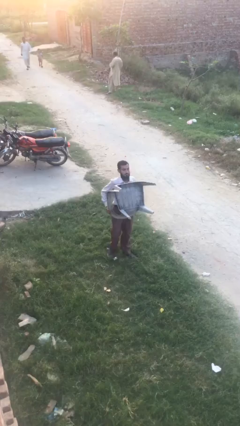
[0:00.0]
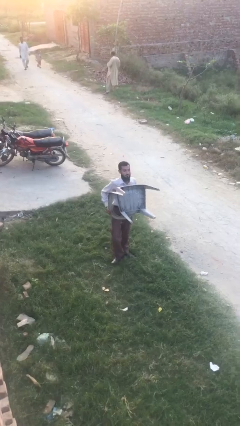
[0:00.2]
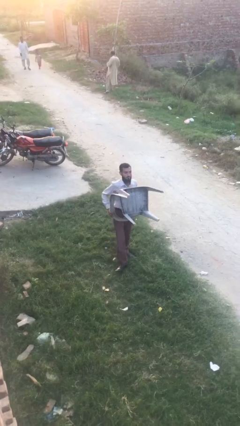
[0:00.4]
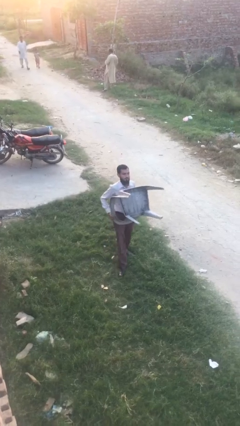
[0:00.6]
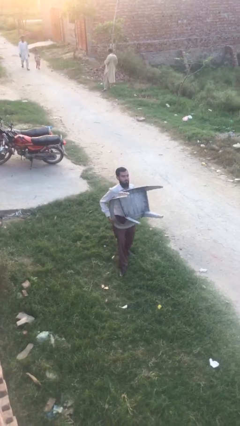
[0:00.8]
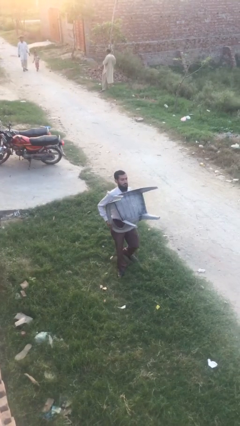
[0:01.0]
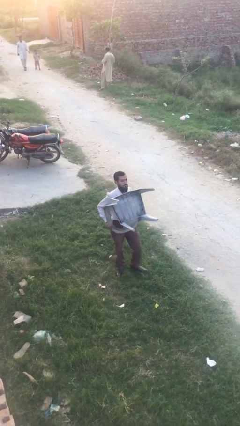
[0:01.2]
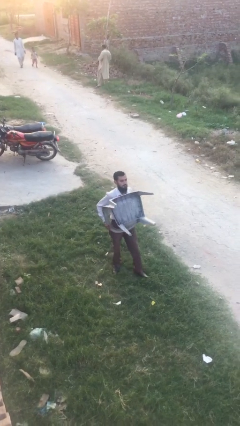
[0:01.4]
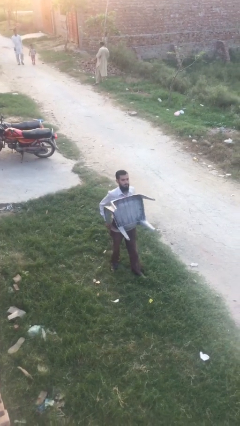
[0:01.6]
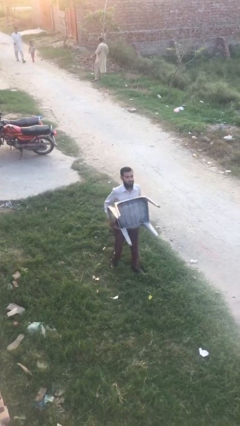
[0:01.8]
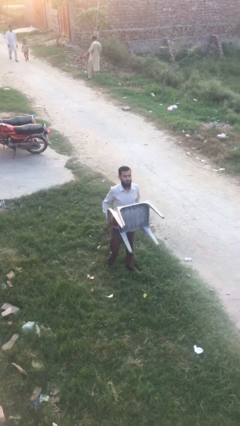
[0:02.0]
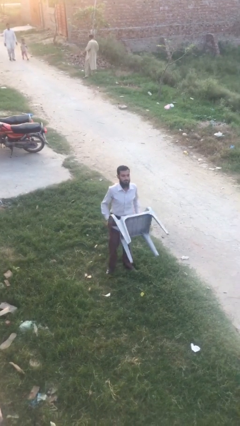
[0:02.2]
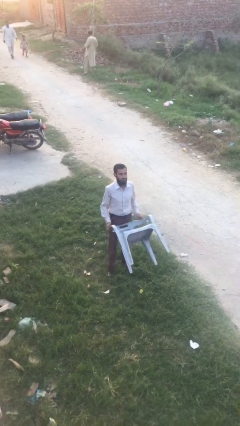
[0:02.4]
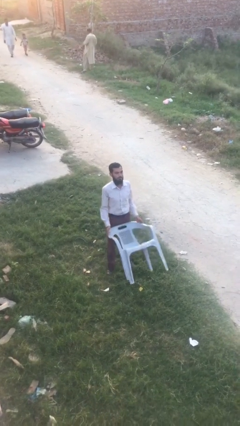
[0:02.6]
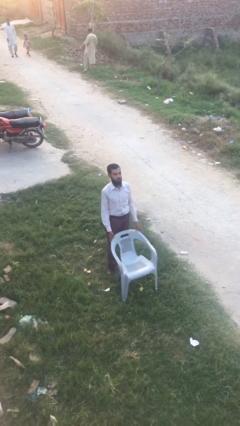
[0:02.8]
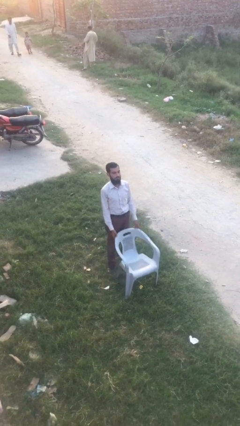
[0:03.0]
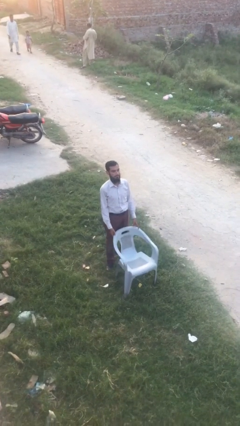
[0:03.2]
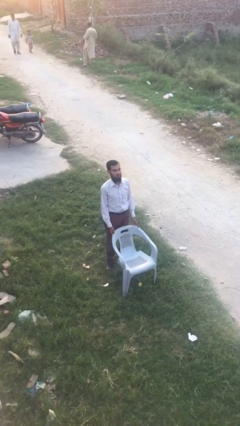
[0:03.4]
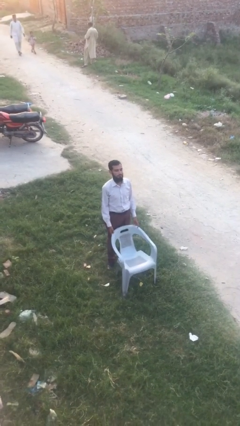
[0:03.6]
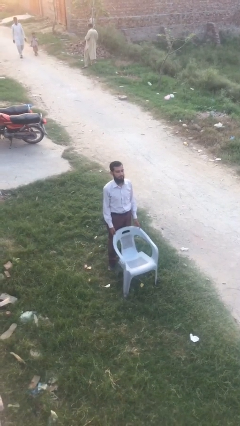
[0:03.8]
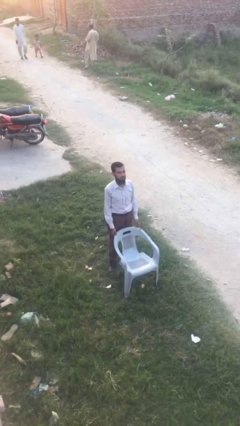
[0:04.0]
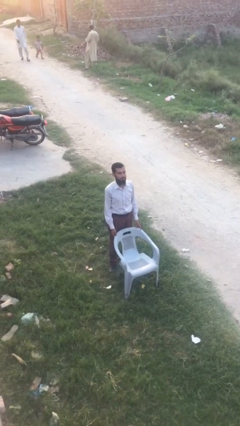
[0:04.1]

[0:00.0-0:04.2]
person puts down object on floor

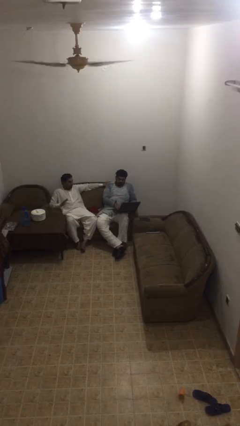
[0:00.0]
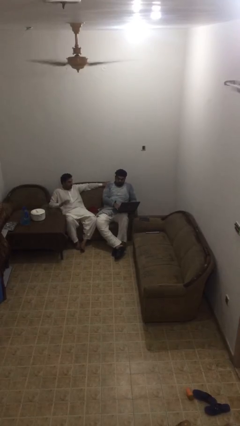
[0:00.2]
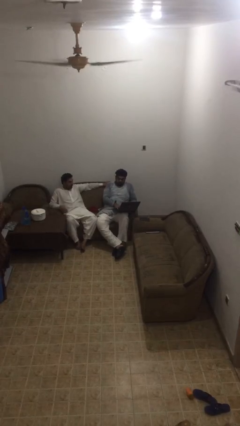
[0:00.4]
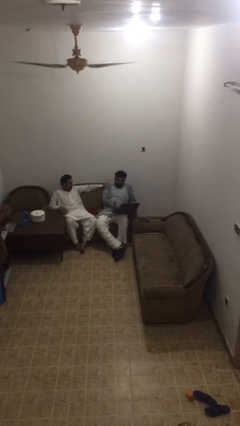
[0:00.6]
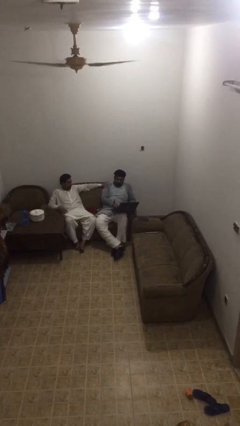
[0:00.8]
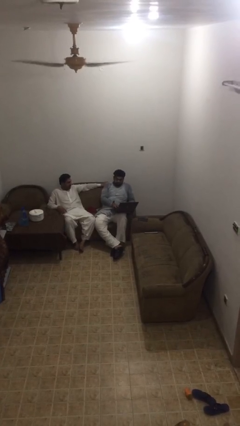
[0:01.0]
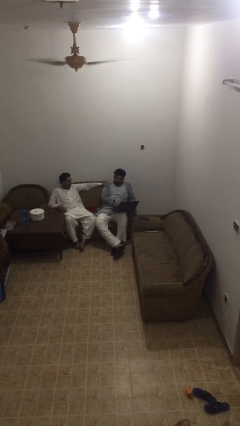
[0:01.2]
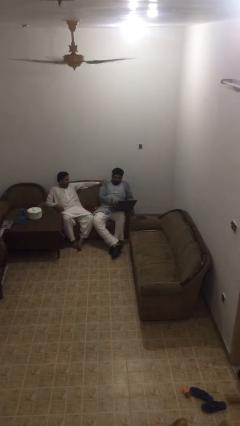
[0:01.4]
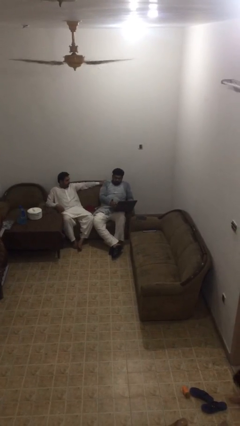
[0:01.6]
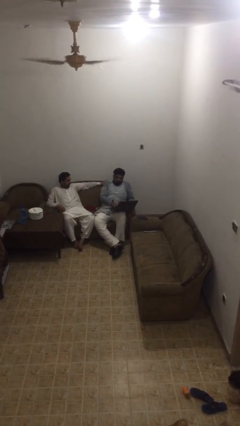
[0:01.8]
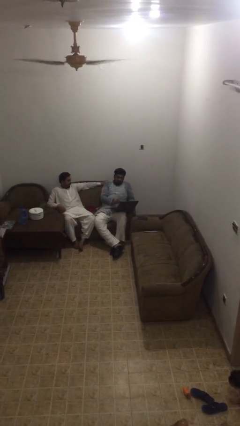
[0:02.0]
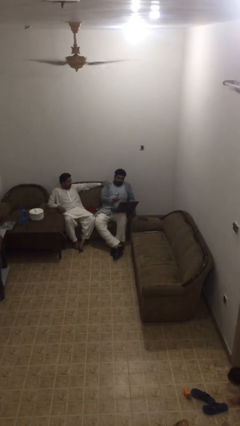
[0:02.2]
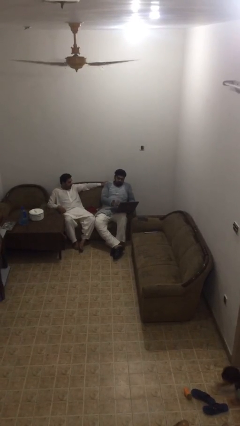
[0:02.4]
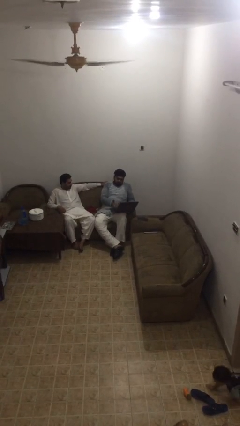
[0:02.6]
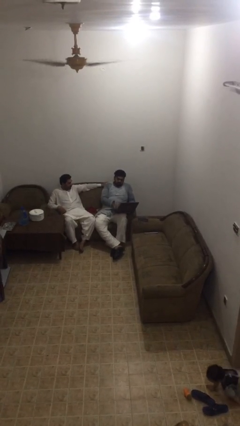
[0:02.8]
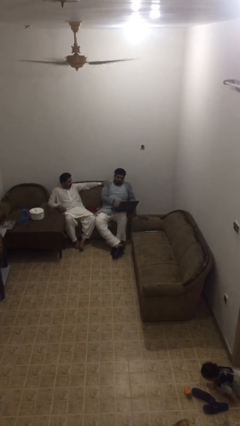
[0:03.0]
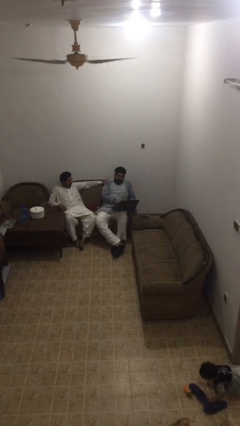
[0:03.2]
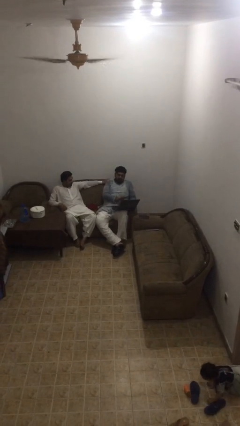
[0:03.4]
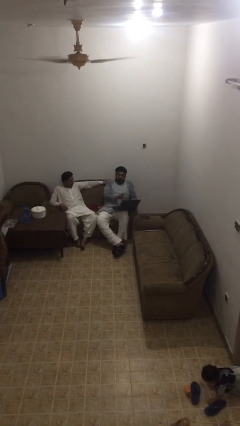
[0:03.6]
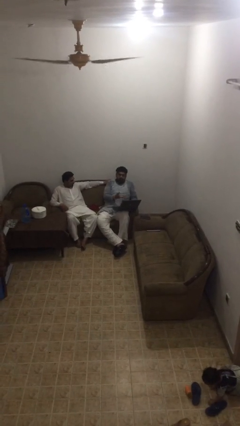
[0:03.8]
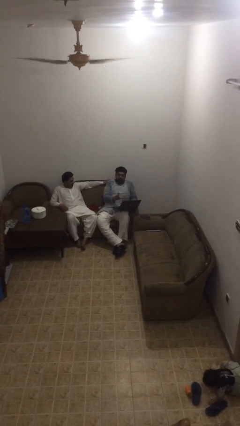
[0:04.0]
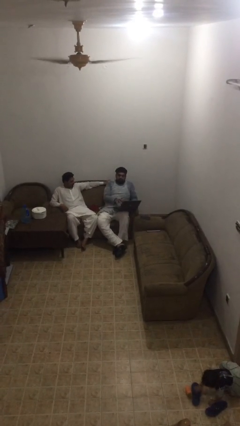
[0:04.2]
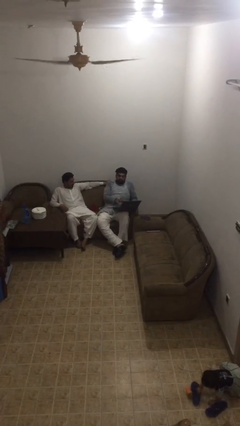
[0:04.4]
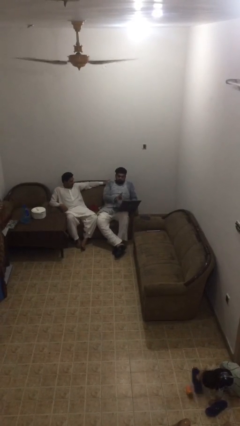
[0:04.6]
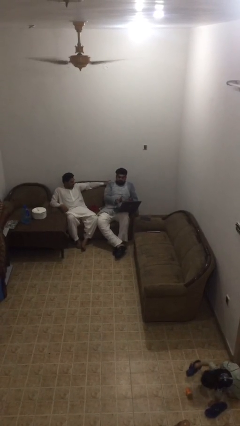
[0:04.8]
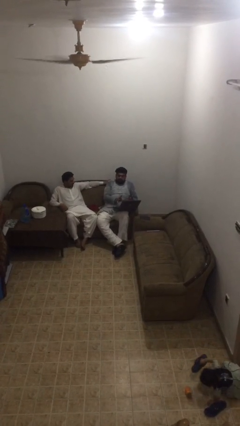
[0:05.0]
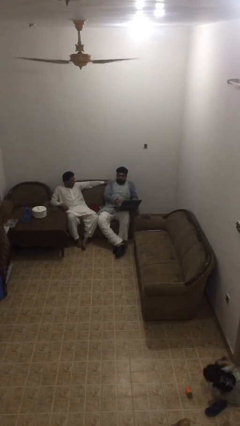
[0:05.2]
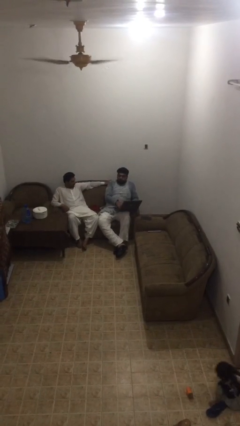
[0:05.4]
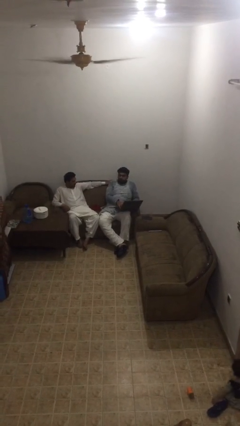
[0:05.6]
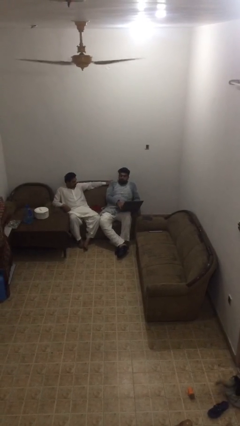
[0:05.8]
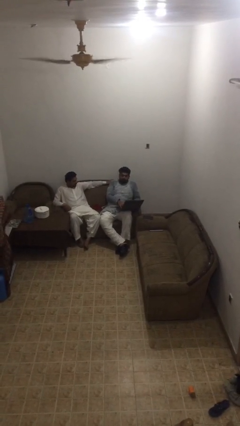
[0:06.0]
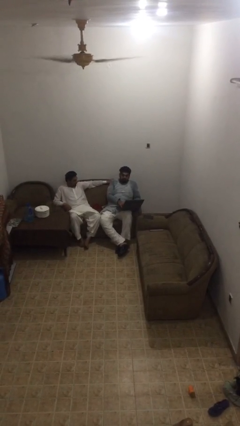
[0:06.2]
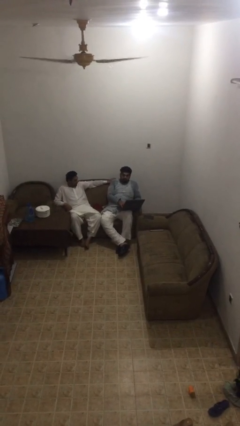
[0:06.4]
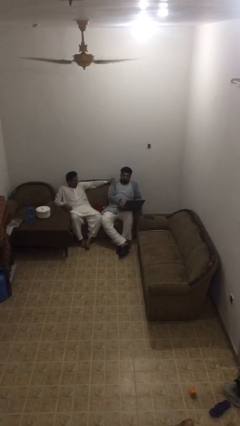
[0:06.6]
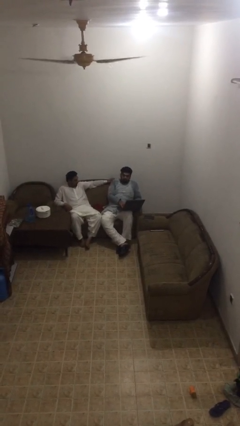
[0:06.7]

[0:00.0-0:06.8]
person interacts with laptop

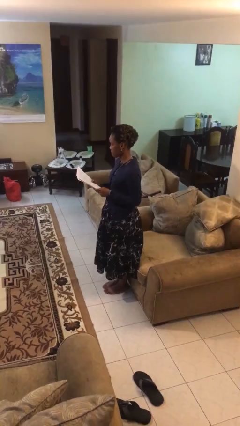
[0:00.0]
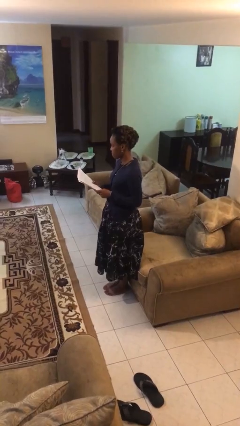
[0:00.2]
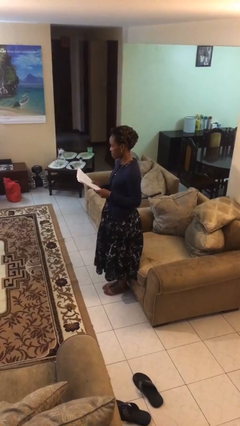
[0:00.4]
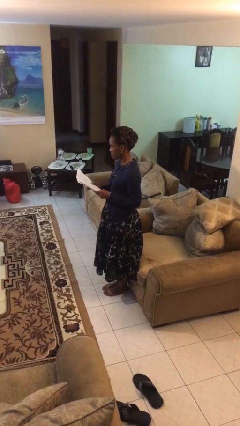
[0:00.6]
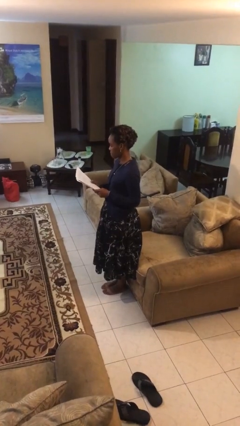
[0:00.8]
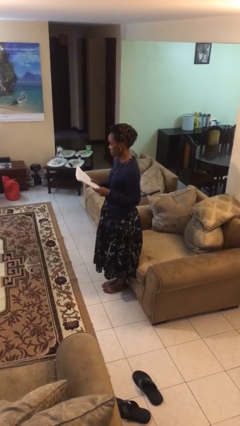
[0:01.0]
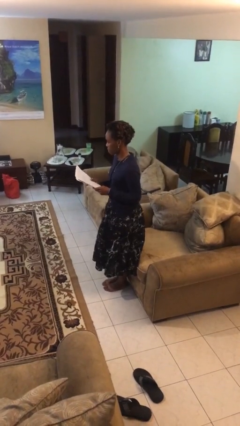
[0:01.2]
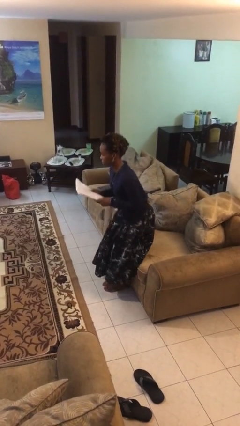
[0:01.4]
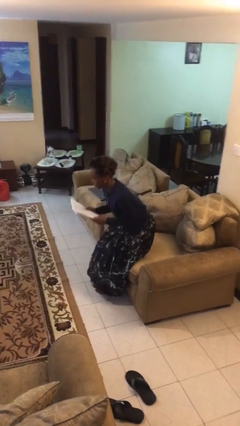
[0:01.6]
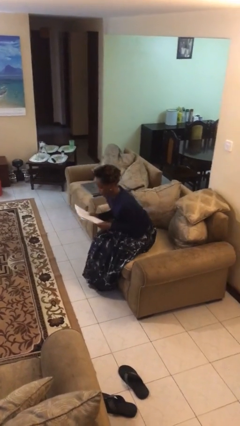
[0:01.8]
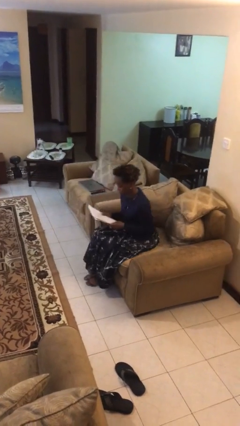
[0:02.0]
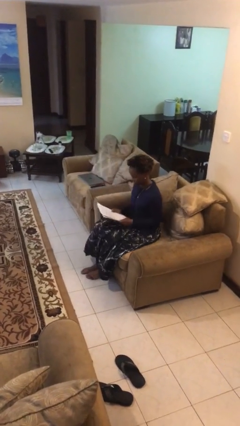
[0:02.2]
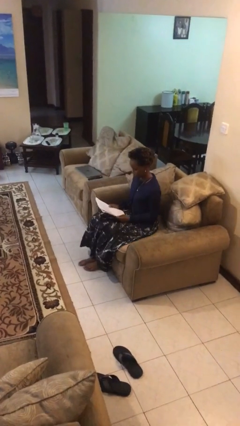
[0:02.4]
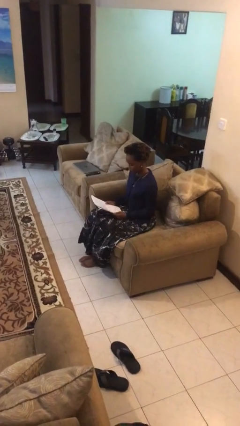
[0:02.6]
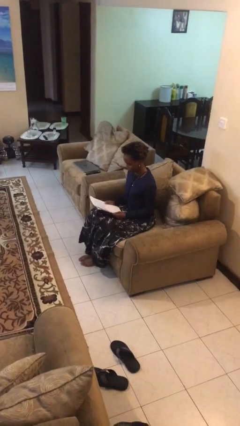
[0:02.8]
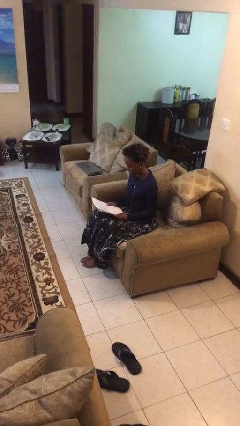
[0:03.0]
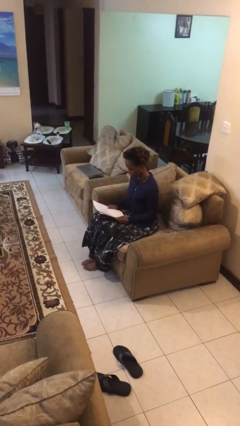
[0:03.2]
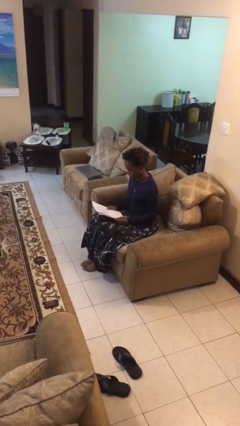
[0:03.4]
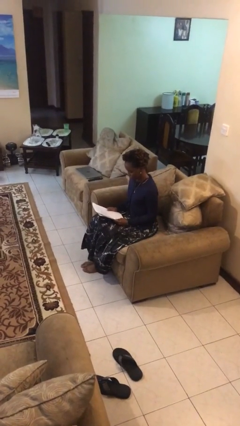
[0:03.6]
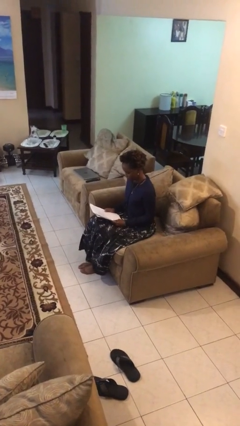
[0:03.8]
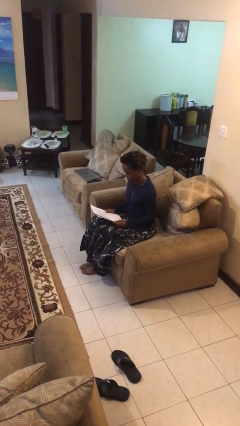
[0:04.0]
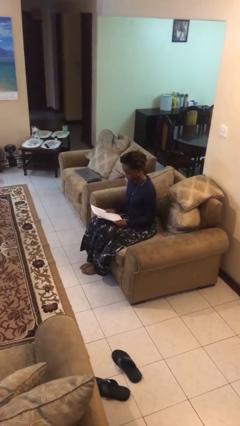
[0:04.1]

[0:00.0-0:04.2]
person sits down

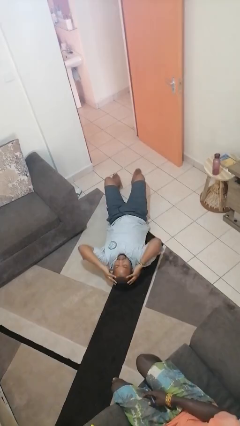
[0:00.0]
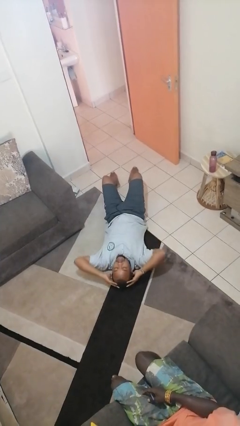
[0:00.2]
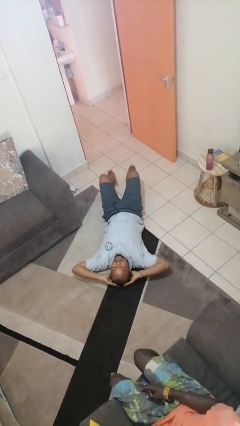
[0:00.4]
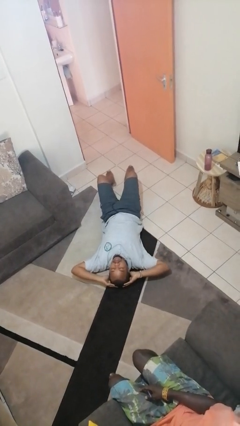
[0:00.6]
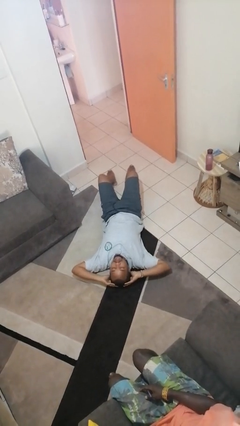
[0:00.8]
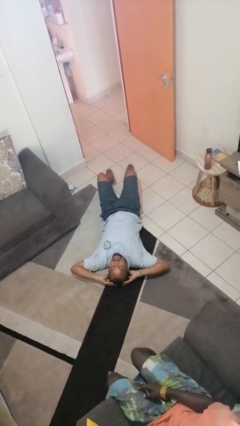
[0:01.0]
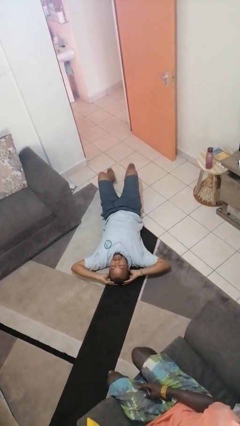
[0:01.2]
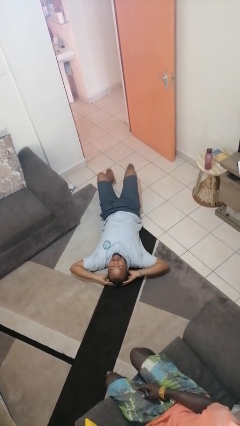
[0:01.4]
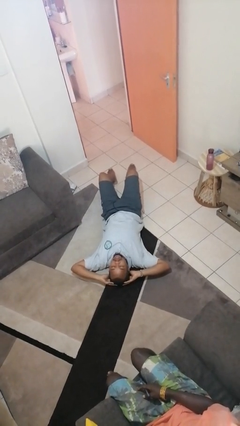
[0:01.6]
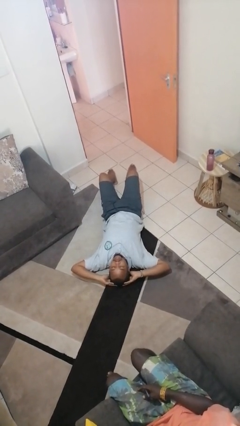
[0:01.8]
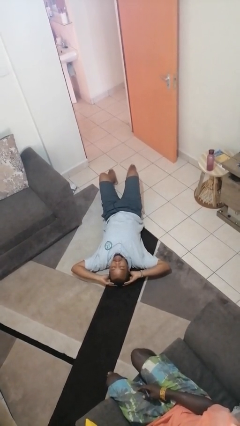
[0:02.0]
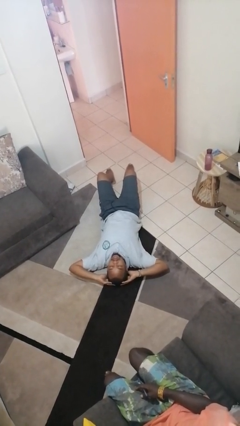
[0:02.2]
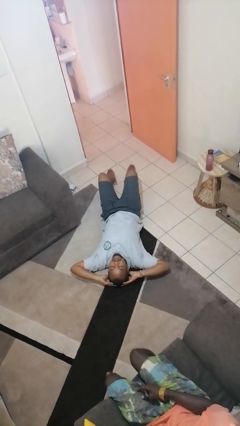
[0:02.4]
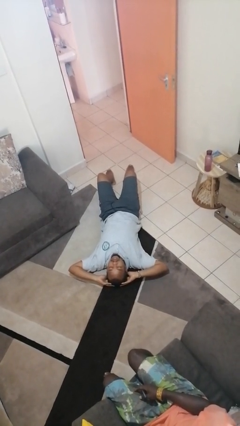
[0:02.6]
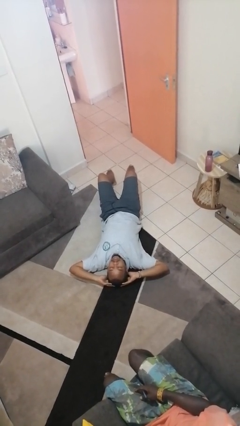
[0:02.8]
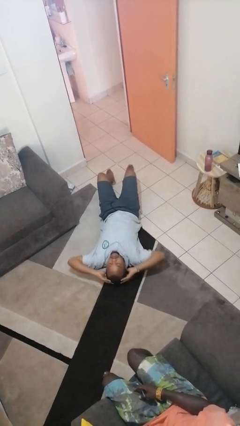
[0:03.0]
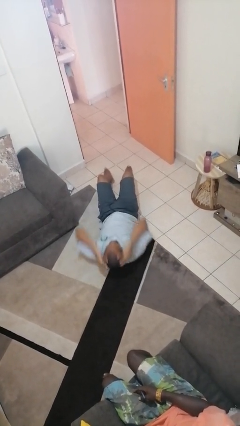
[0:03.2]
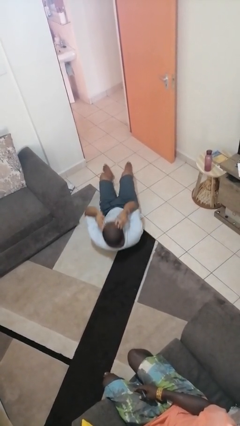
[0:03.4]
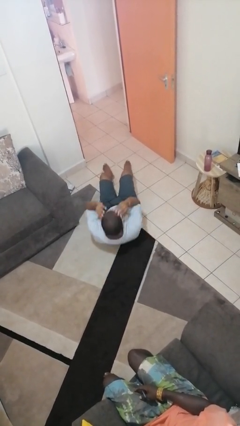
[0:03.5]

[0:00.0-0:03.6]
person exercises with lunges
